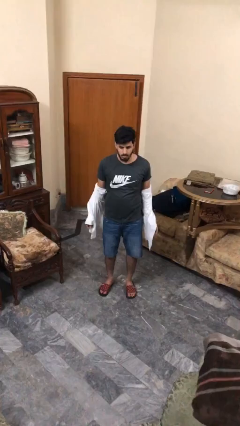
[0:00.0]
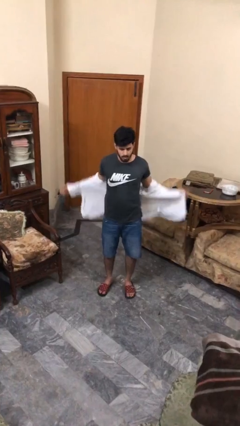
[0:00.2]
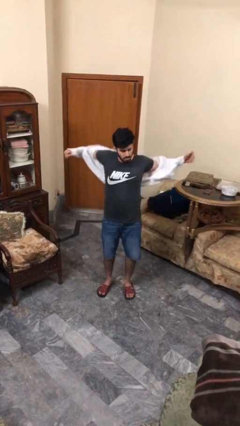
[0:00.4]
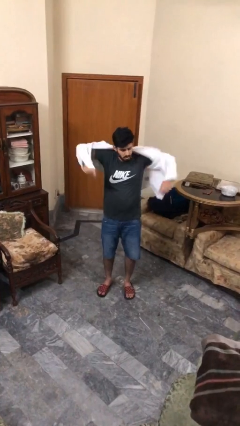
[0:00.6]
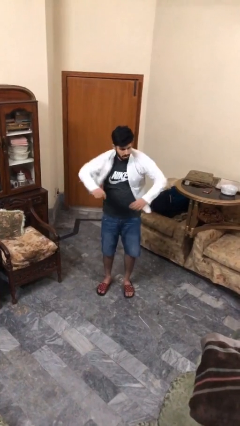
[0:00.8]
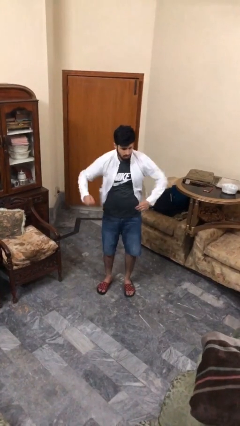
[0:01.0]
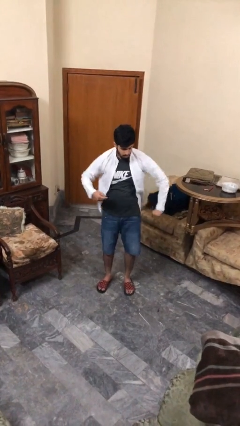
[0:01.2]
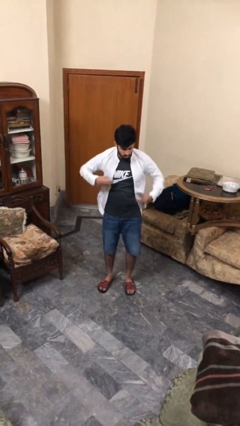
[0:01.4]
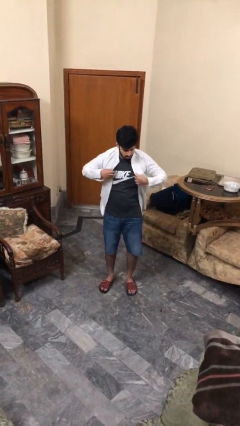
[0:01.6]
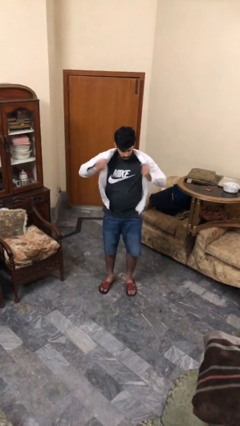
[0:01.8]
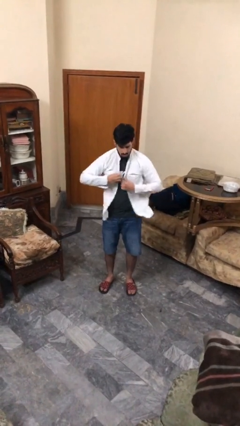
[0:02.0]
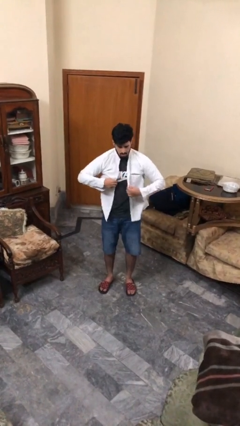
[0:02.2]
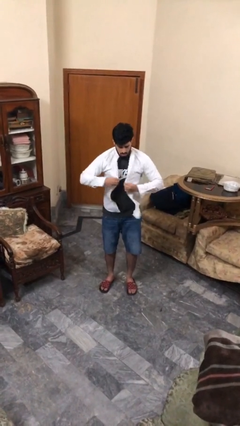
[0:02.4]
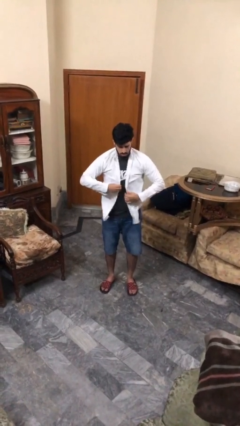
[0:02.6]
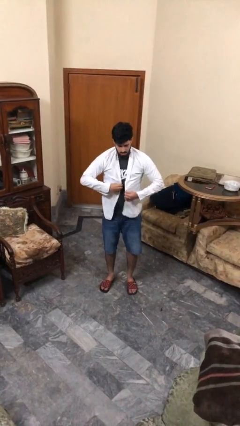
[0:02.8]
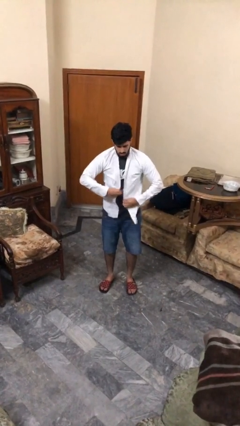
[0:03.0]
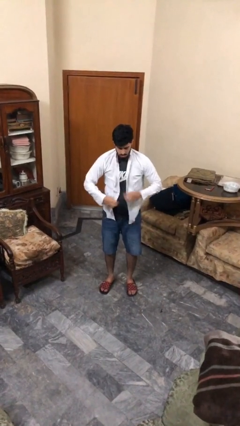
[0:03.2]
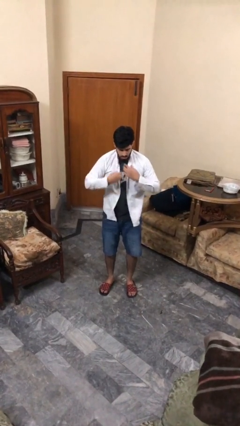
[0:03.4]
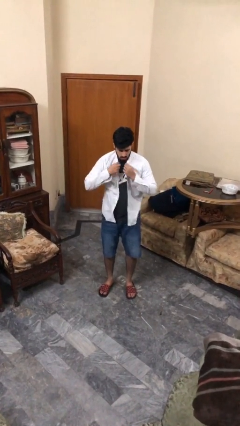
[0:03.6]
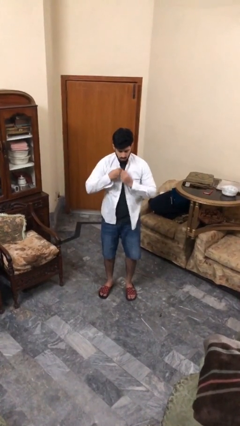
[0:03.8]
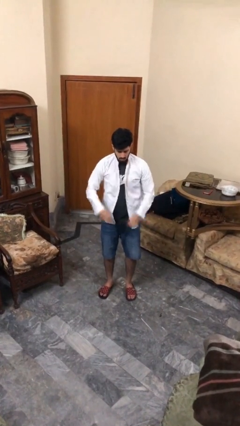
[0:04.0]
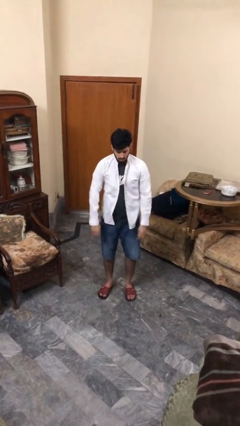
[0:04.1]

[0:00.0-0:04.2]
person puts on shirt

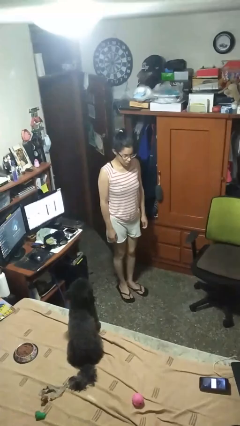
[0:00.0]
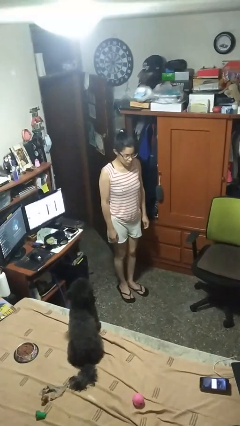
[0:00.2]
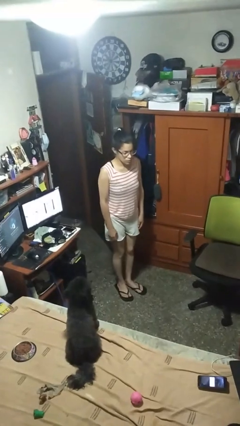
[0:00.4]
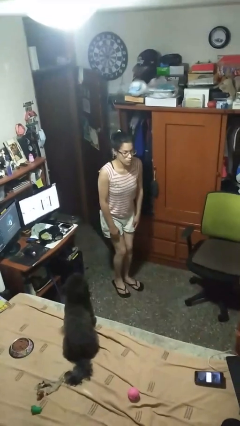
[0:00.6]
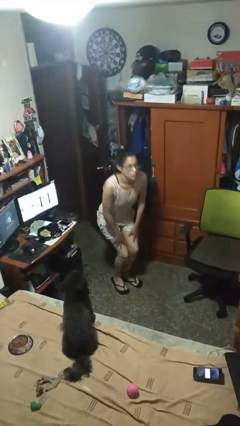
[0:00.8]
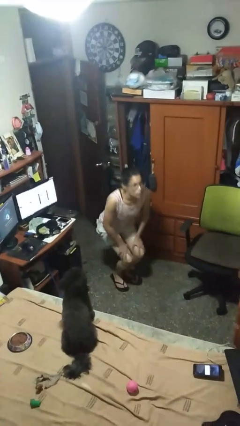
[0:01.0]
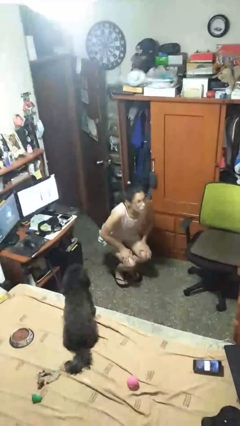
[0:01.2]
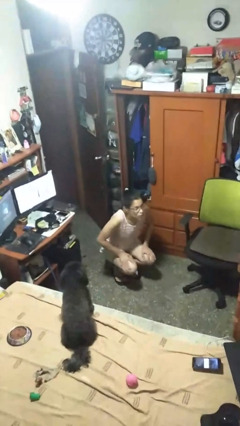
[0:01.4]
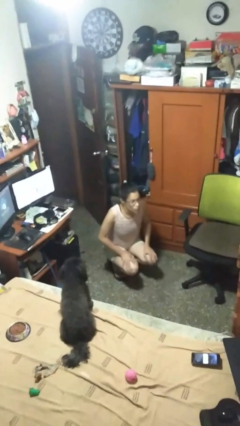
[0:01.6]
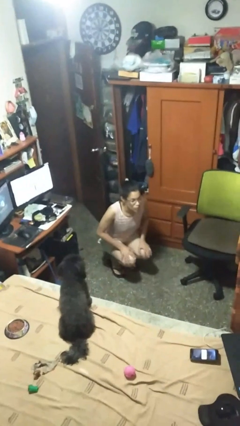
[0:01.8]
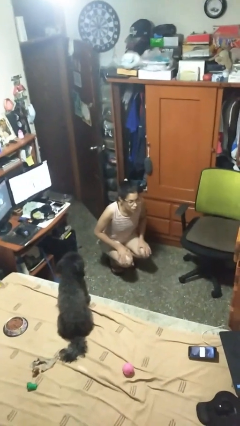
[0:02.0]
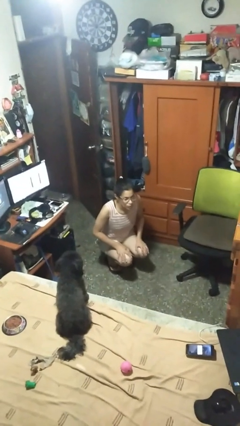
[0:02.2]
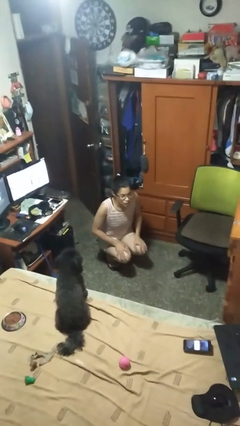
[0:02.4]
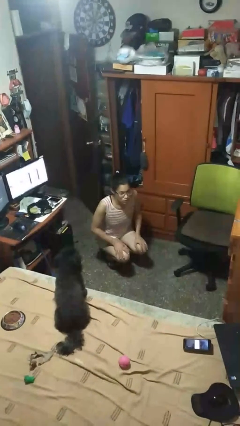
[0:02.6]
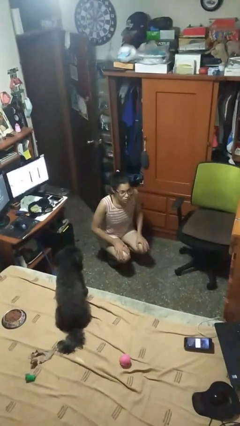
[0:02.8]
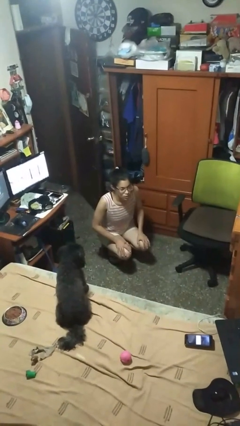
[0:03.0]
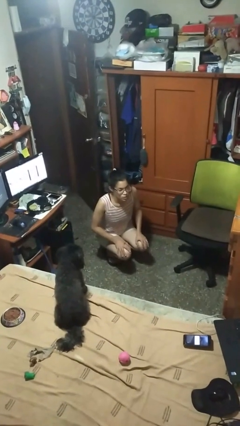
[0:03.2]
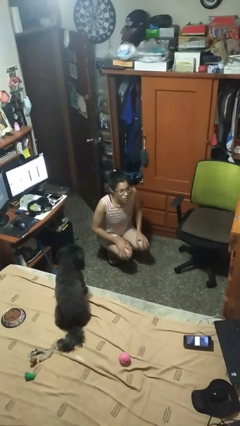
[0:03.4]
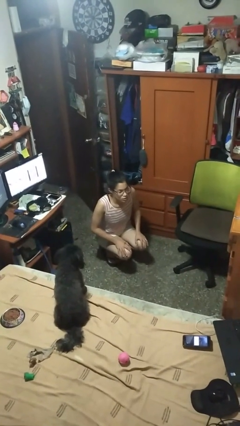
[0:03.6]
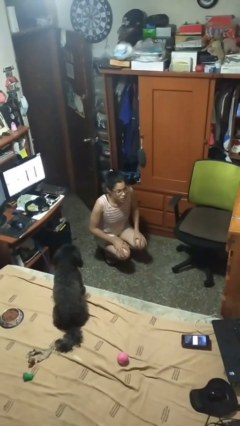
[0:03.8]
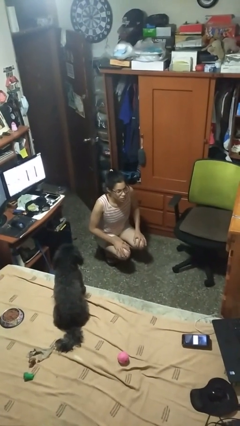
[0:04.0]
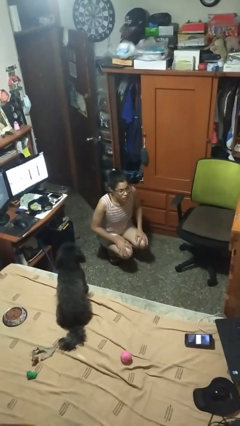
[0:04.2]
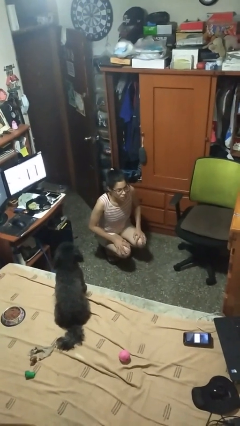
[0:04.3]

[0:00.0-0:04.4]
person squats

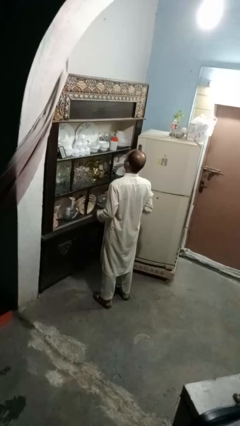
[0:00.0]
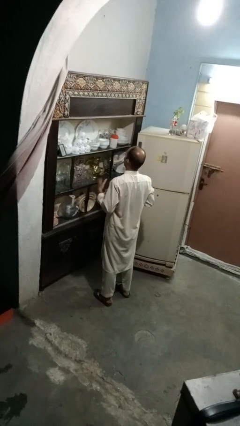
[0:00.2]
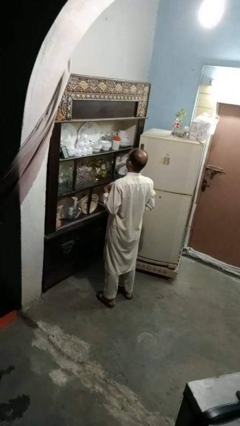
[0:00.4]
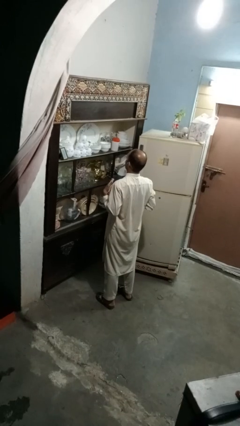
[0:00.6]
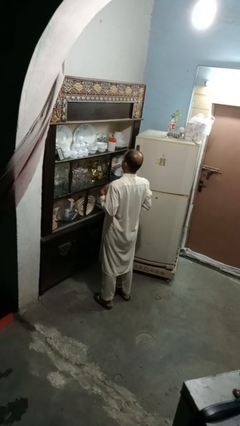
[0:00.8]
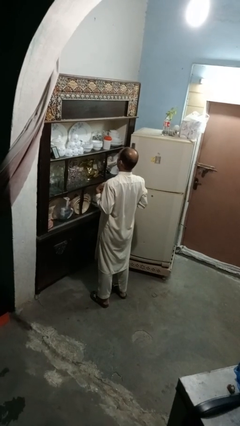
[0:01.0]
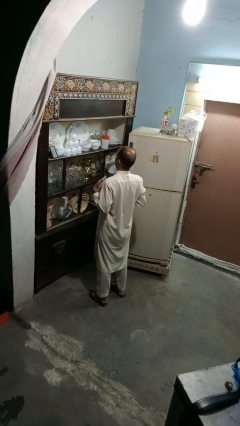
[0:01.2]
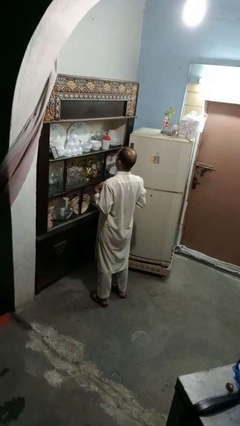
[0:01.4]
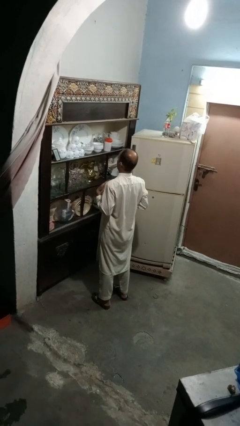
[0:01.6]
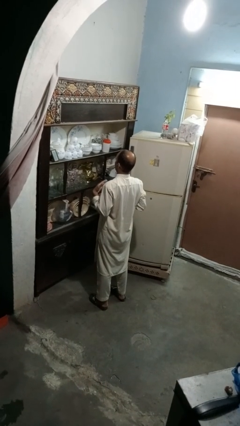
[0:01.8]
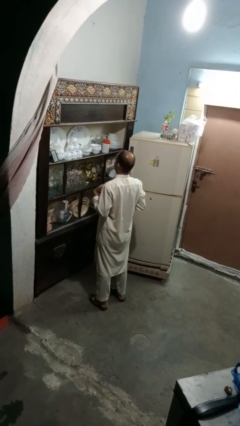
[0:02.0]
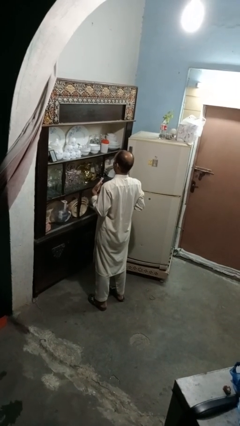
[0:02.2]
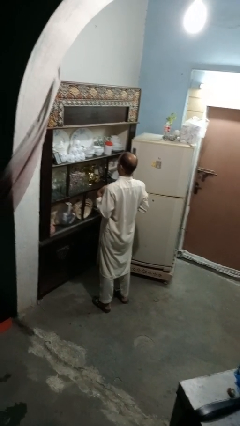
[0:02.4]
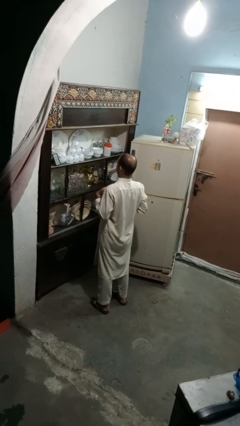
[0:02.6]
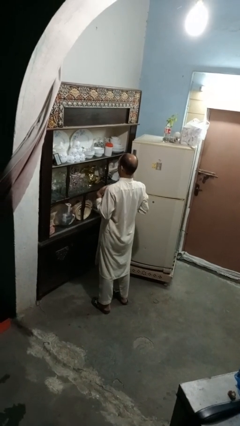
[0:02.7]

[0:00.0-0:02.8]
person drums on chest

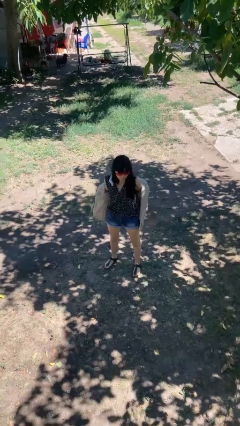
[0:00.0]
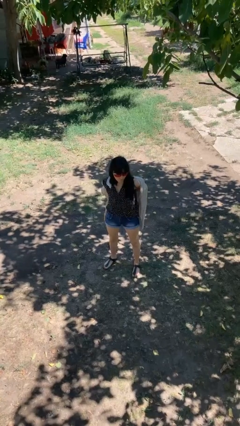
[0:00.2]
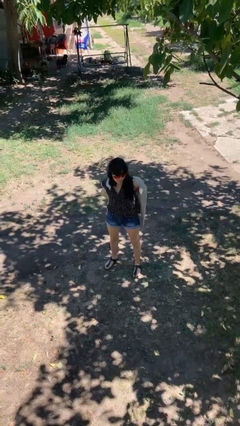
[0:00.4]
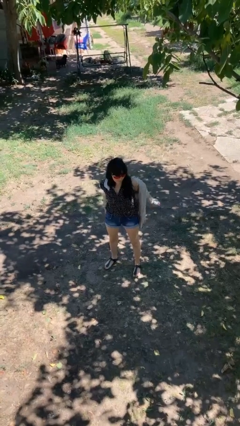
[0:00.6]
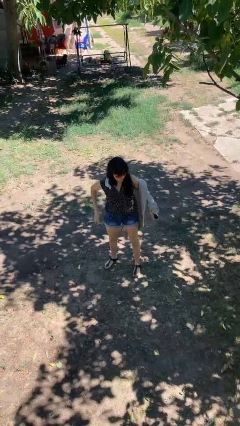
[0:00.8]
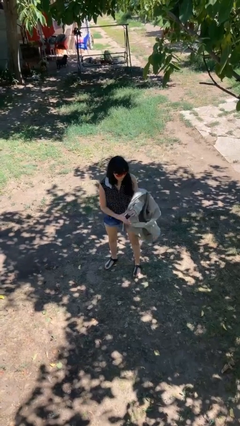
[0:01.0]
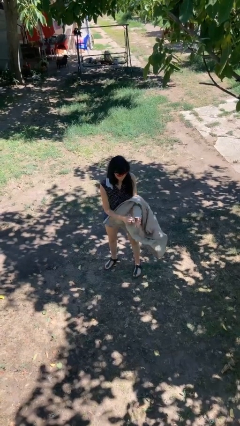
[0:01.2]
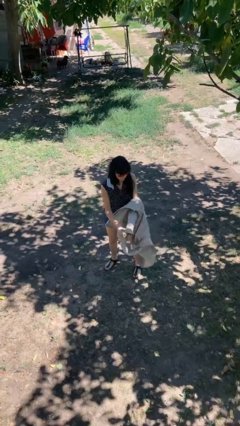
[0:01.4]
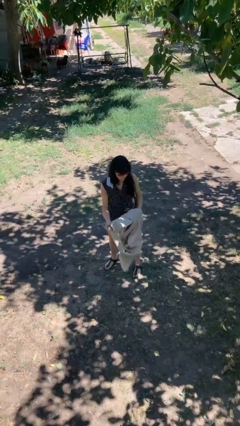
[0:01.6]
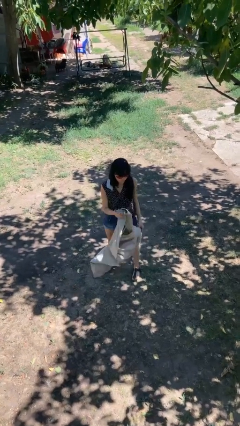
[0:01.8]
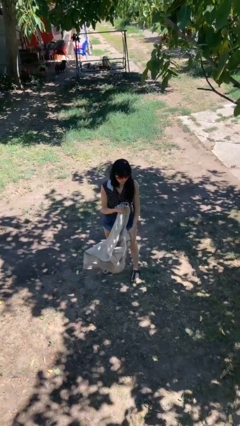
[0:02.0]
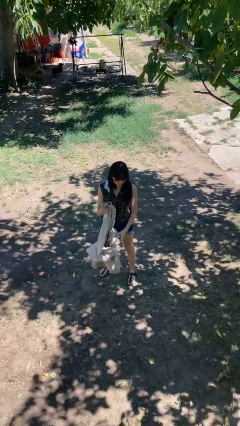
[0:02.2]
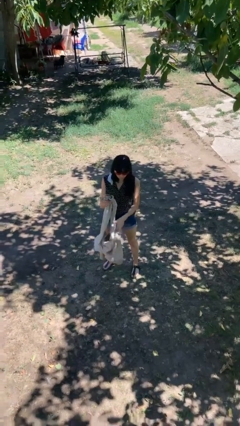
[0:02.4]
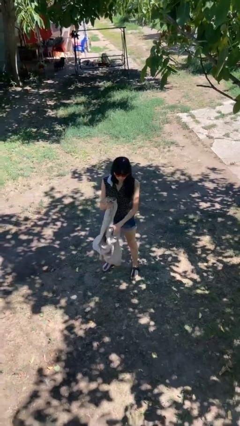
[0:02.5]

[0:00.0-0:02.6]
person takes off jacket

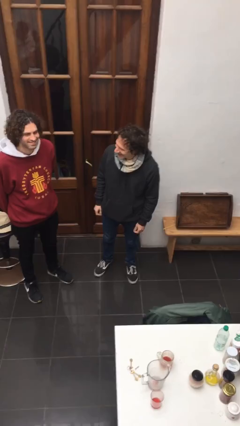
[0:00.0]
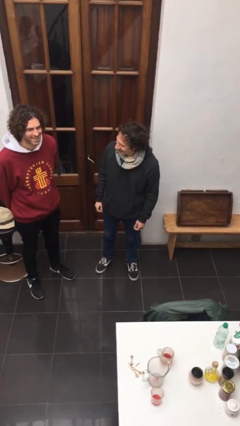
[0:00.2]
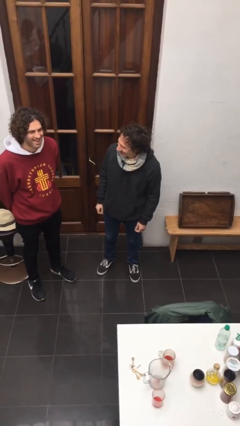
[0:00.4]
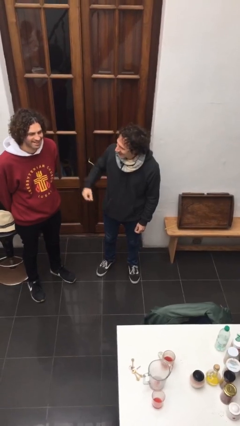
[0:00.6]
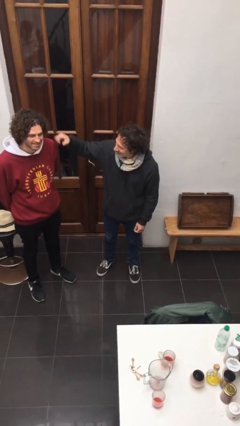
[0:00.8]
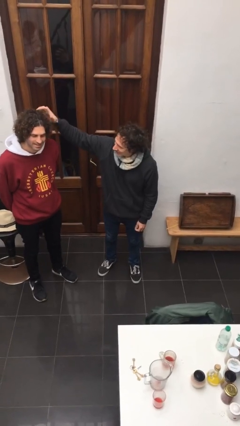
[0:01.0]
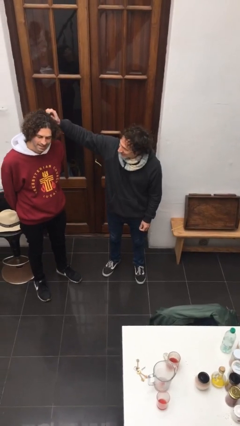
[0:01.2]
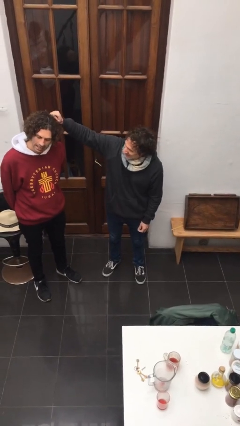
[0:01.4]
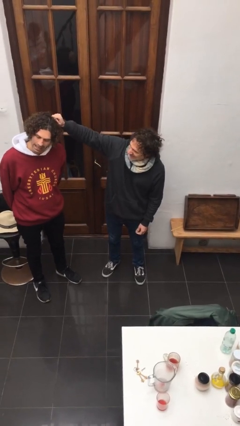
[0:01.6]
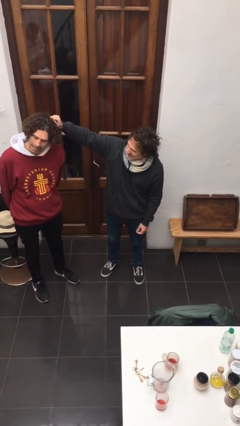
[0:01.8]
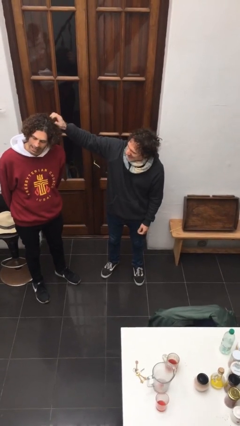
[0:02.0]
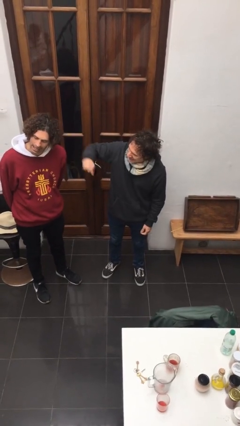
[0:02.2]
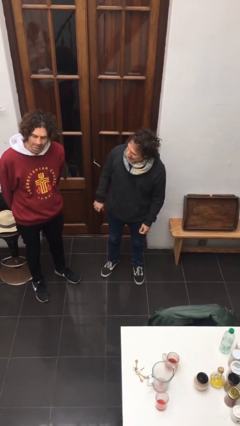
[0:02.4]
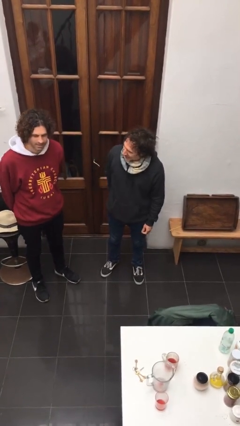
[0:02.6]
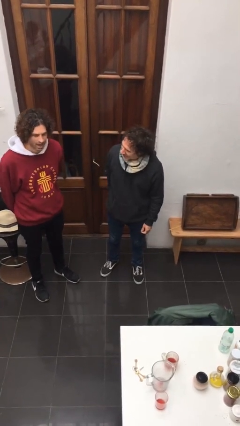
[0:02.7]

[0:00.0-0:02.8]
person grabs person by hair

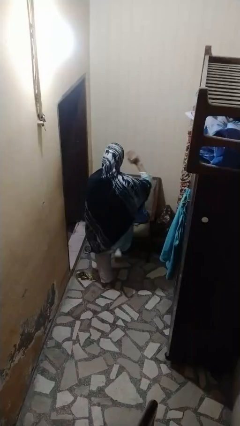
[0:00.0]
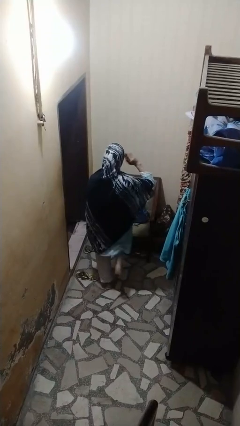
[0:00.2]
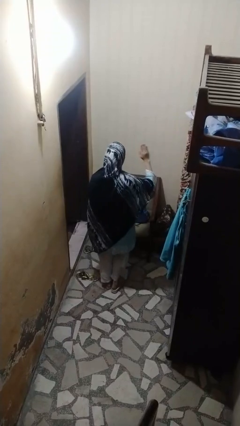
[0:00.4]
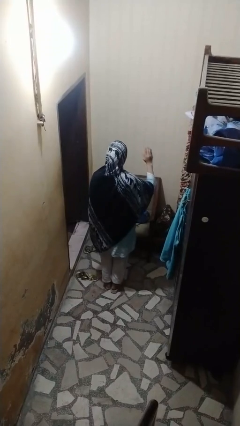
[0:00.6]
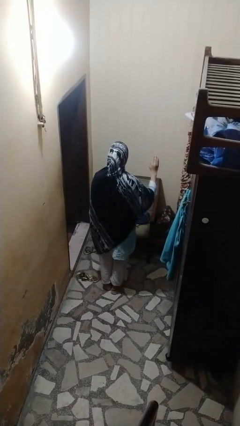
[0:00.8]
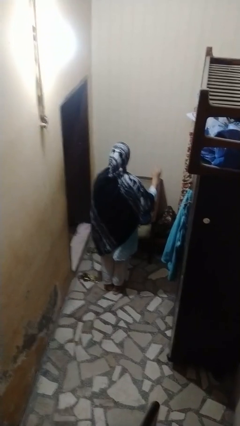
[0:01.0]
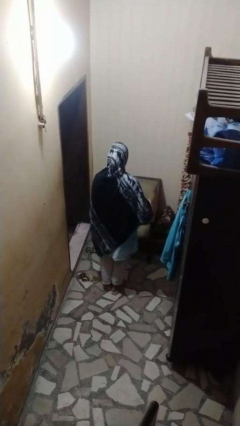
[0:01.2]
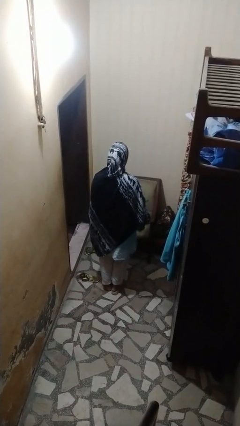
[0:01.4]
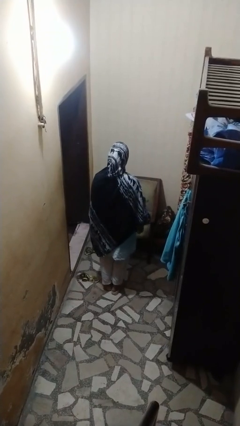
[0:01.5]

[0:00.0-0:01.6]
person salutes
